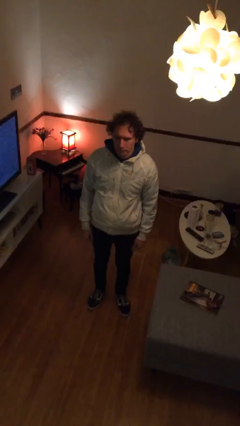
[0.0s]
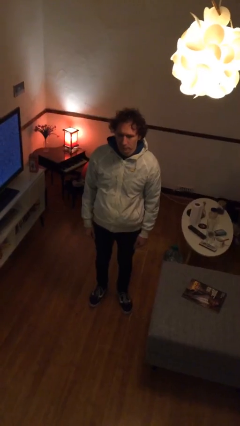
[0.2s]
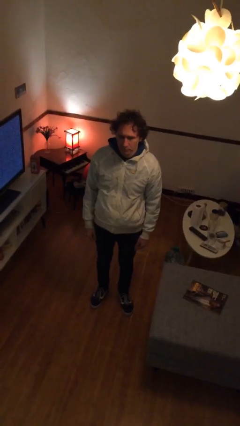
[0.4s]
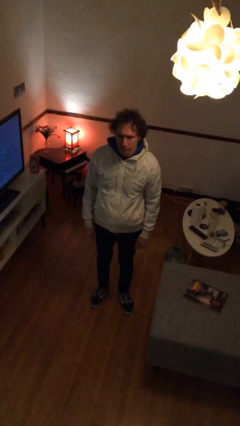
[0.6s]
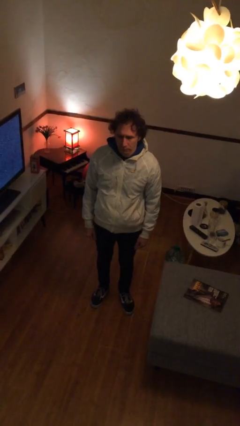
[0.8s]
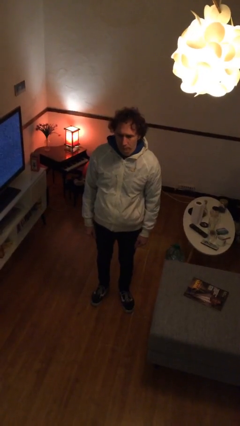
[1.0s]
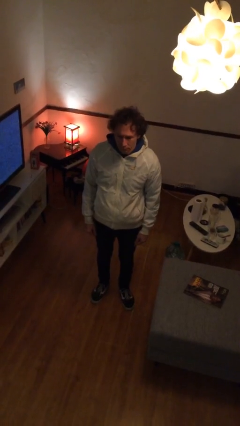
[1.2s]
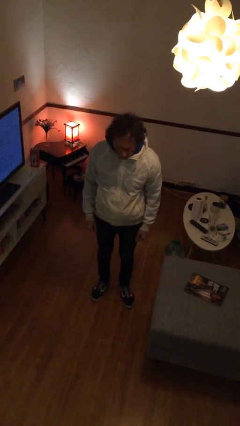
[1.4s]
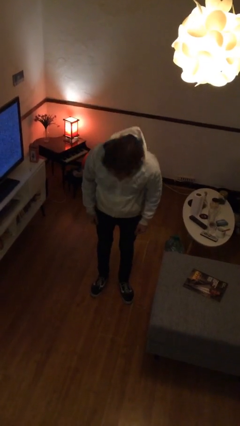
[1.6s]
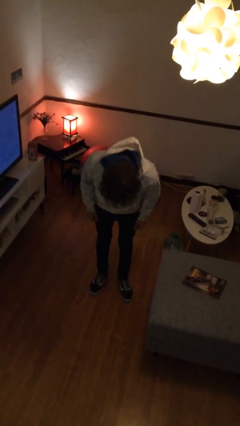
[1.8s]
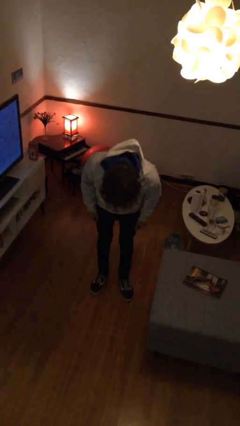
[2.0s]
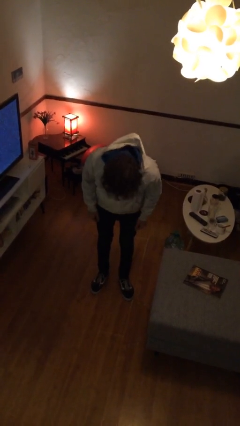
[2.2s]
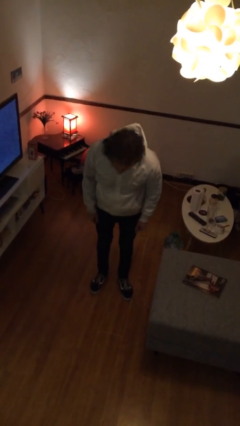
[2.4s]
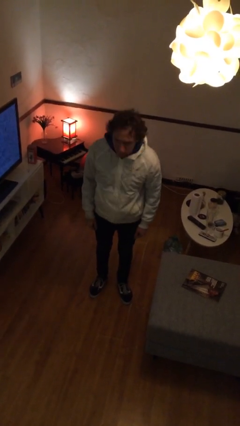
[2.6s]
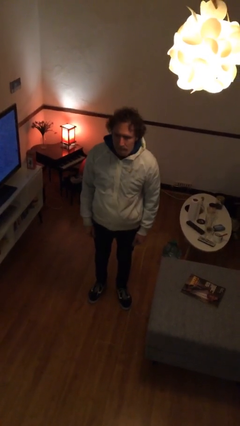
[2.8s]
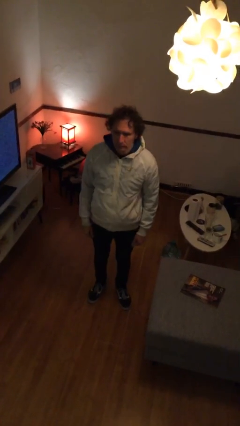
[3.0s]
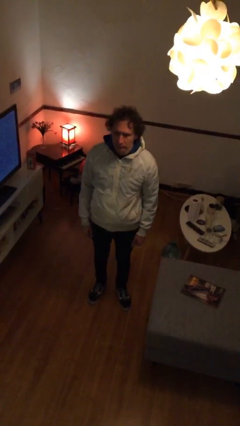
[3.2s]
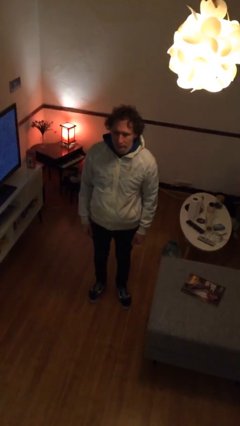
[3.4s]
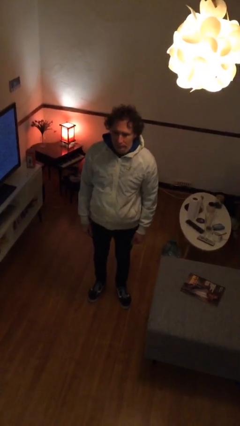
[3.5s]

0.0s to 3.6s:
person bows

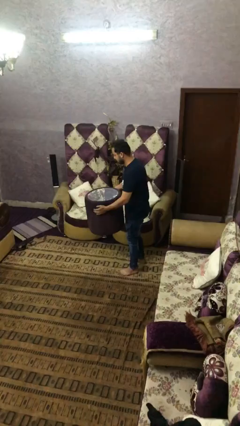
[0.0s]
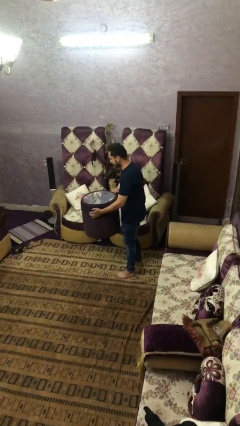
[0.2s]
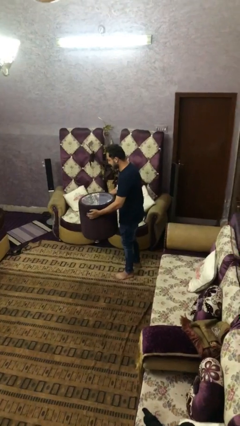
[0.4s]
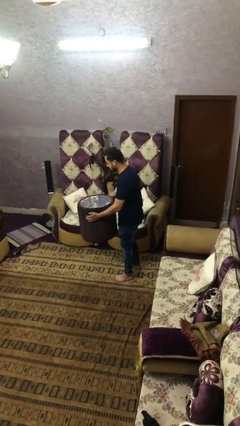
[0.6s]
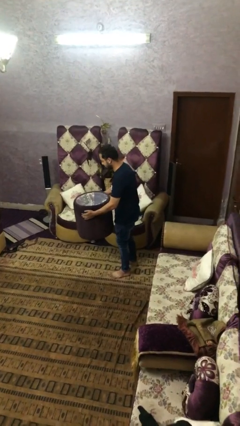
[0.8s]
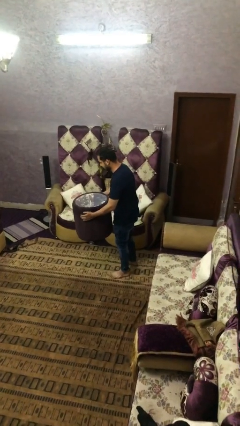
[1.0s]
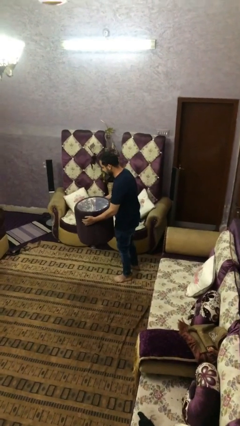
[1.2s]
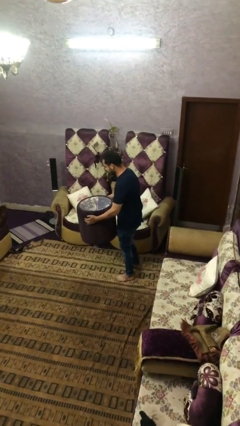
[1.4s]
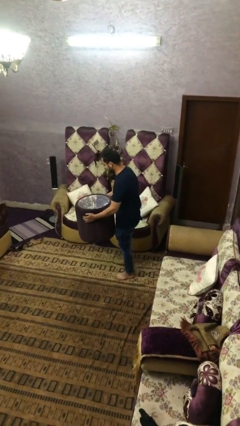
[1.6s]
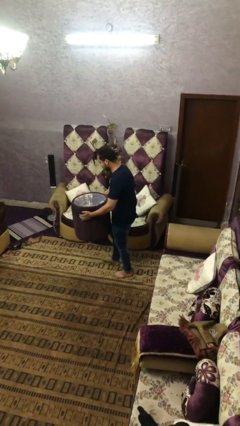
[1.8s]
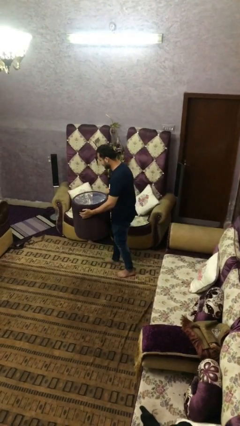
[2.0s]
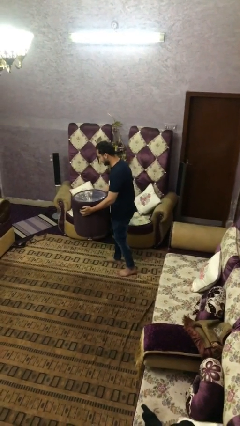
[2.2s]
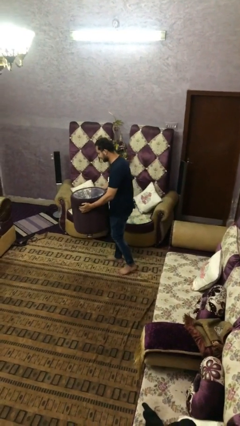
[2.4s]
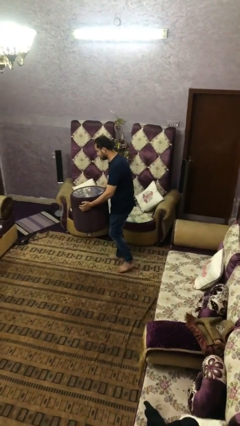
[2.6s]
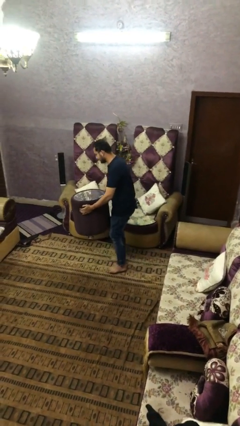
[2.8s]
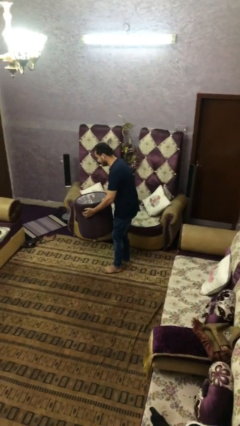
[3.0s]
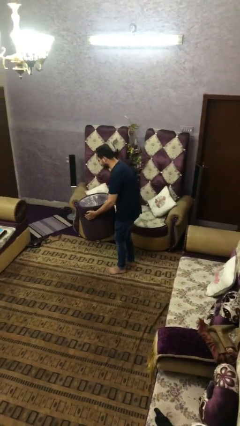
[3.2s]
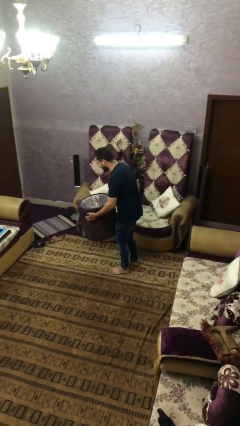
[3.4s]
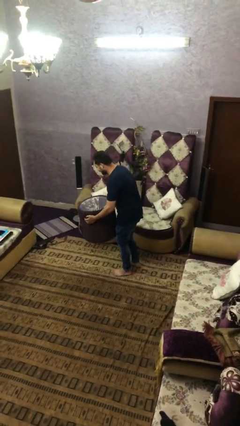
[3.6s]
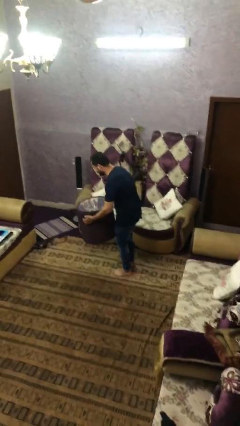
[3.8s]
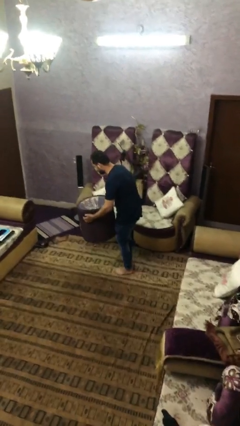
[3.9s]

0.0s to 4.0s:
person carries heavy object

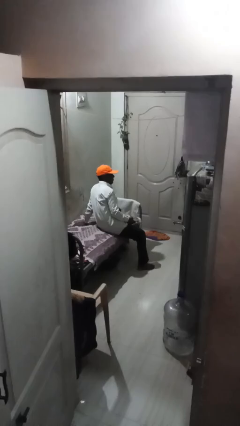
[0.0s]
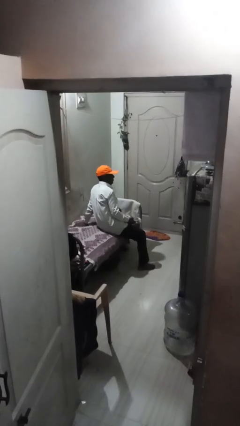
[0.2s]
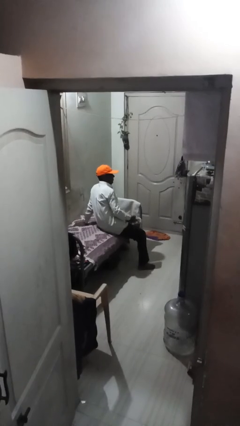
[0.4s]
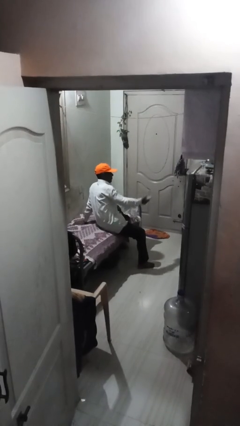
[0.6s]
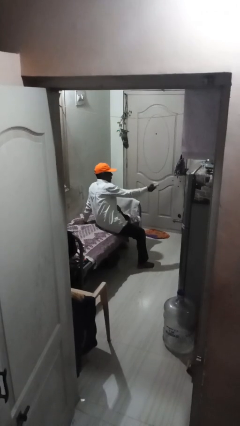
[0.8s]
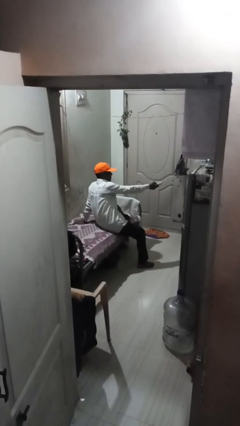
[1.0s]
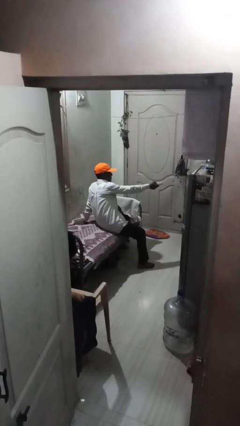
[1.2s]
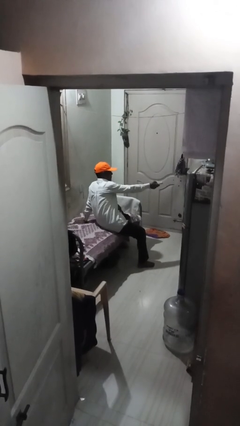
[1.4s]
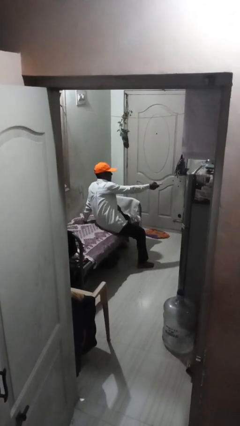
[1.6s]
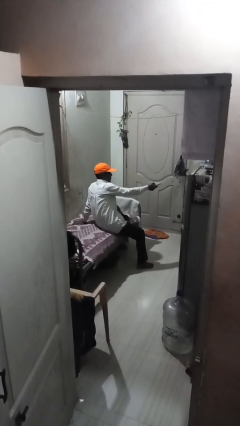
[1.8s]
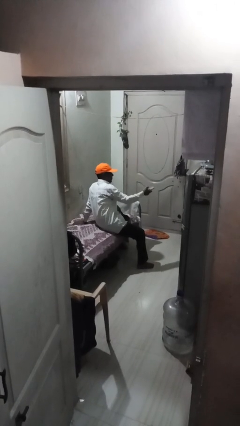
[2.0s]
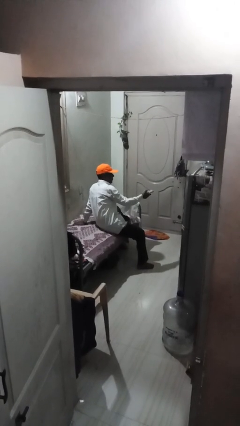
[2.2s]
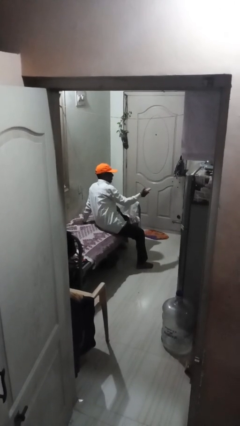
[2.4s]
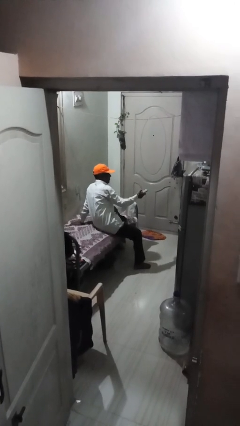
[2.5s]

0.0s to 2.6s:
person uses television remote

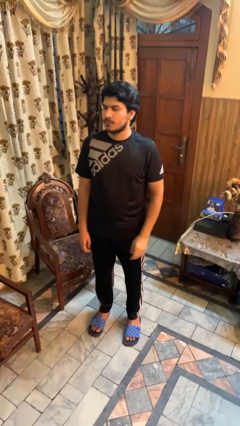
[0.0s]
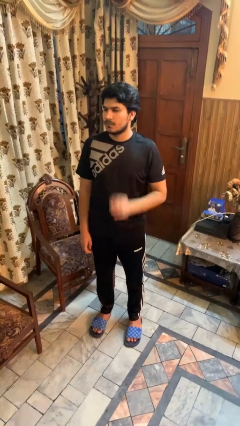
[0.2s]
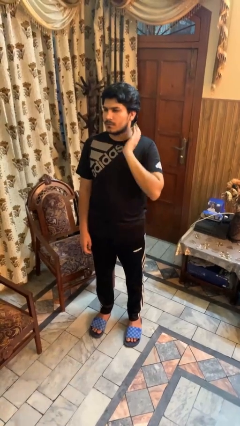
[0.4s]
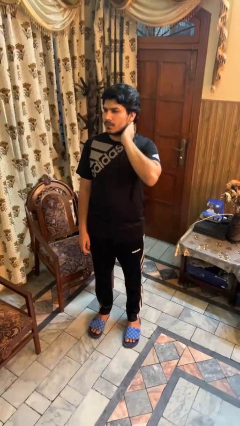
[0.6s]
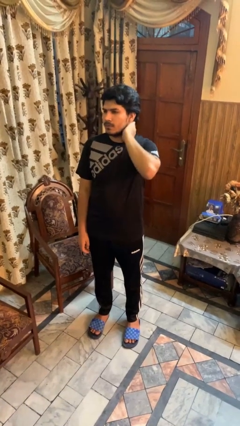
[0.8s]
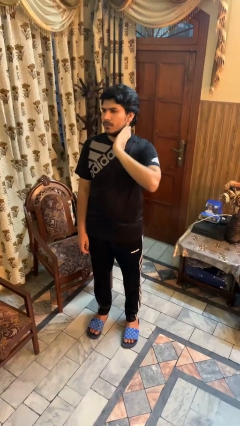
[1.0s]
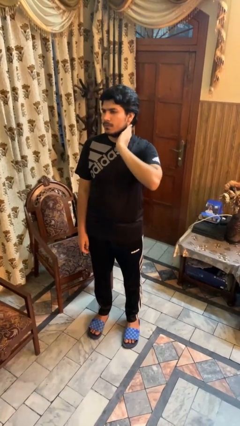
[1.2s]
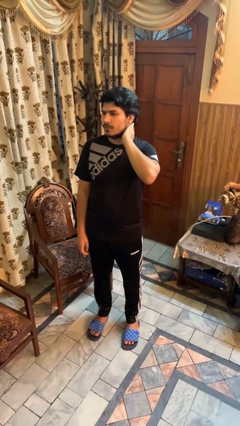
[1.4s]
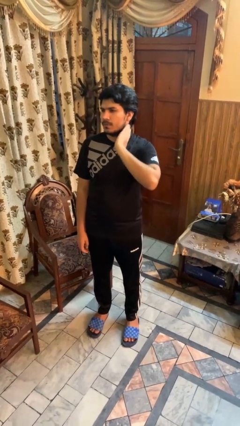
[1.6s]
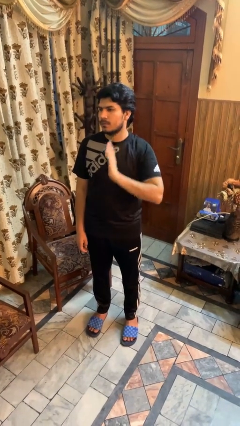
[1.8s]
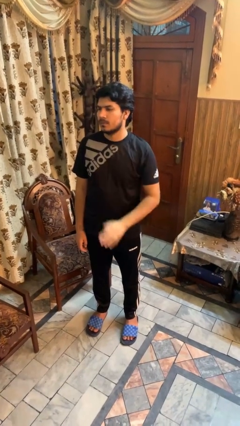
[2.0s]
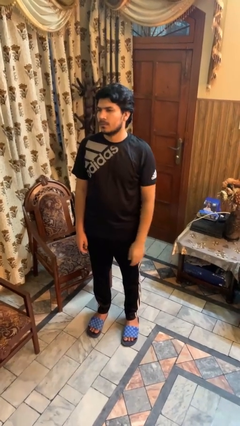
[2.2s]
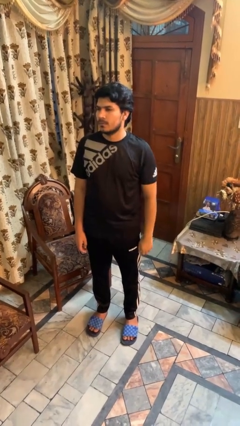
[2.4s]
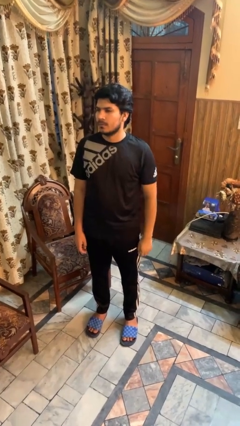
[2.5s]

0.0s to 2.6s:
person rubs neck

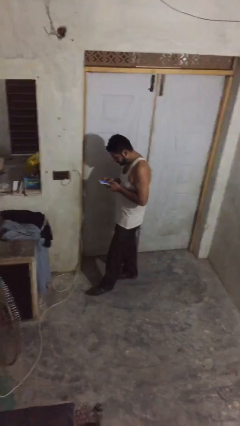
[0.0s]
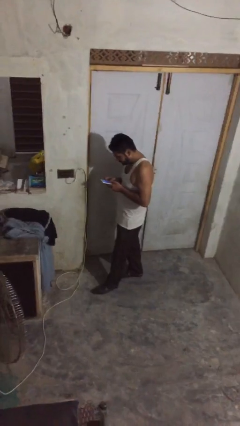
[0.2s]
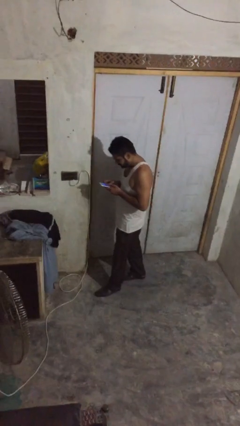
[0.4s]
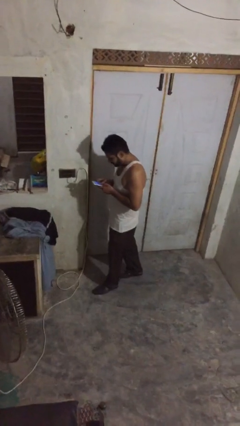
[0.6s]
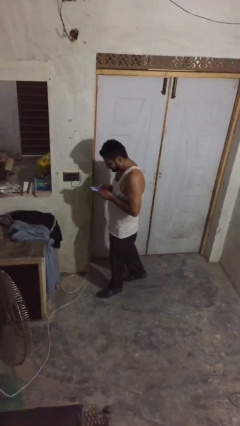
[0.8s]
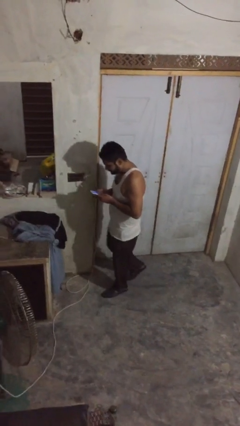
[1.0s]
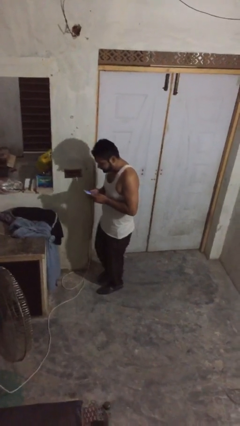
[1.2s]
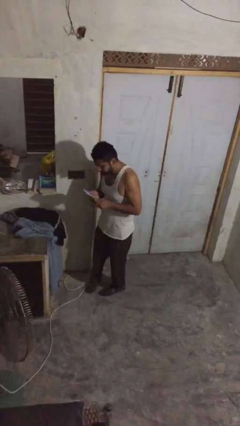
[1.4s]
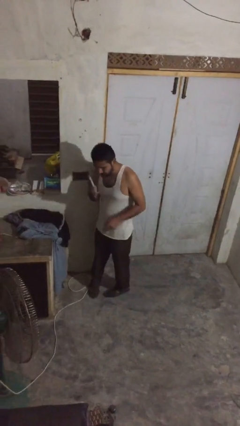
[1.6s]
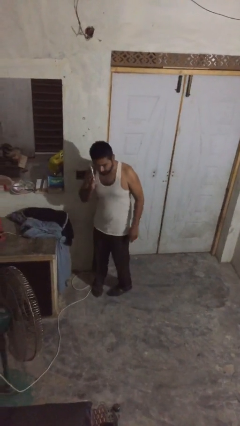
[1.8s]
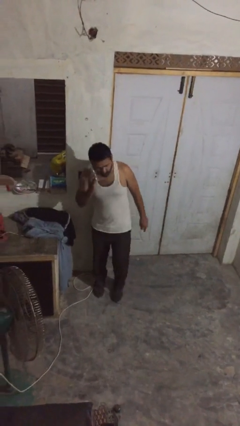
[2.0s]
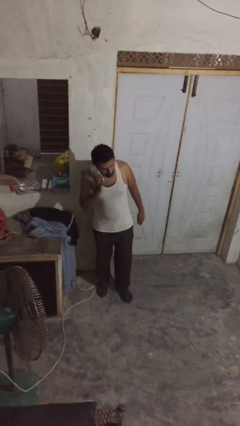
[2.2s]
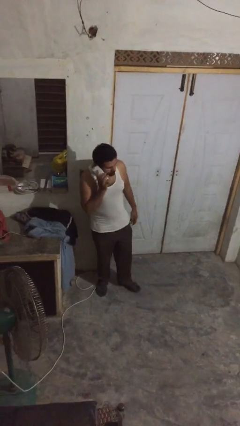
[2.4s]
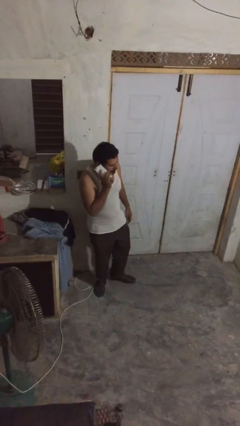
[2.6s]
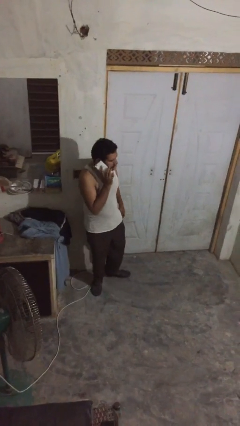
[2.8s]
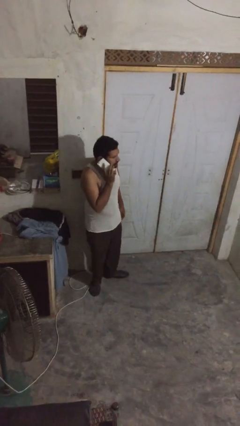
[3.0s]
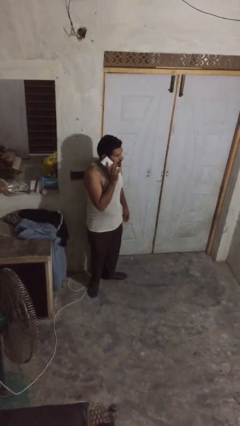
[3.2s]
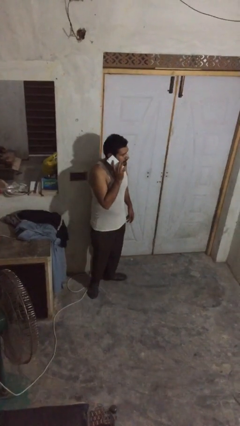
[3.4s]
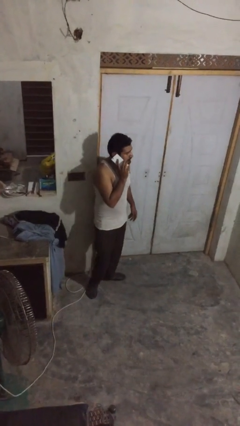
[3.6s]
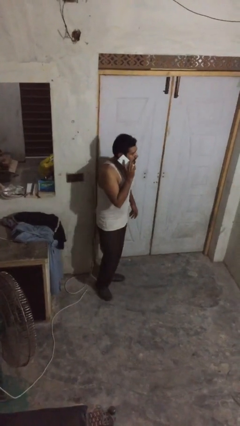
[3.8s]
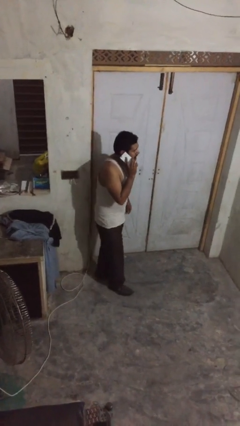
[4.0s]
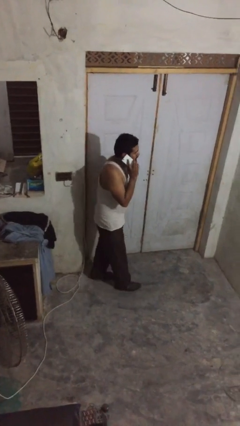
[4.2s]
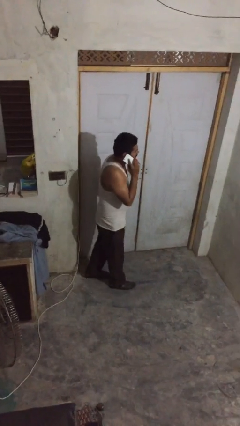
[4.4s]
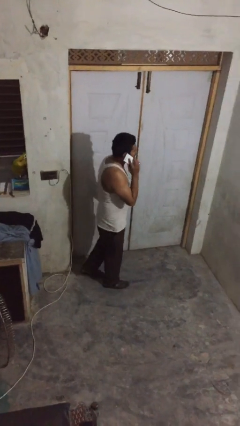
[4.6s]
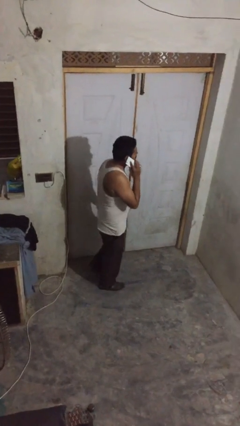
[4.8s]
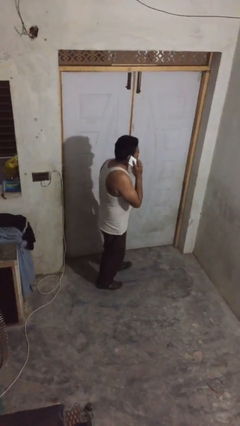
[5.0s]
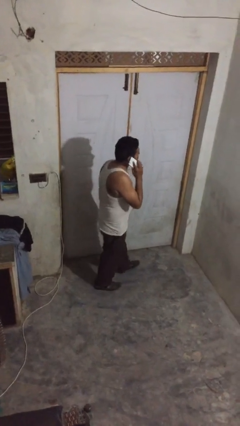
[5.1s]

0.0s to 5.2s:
person talks on phone
